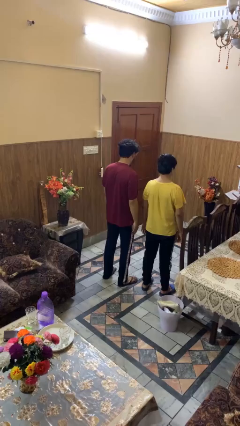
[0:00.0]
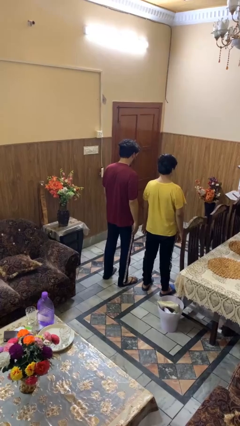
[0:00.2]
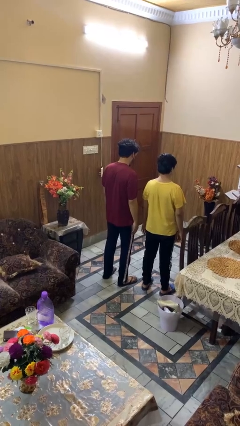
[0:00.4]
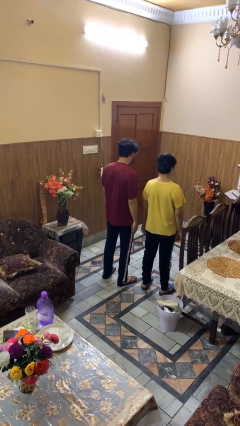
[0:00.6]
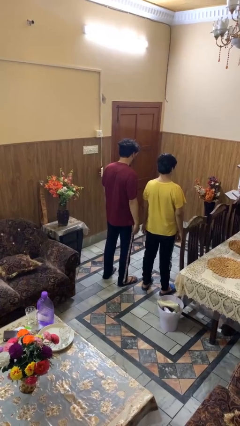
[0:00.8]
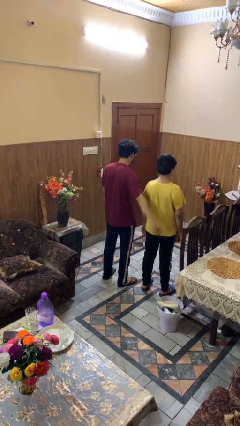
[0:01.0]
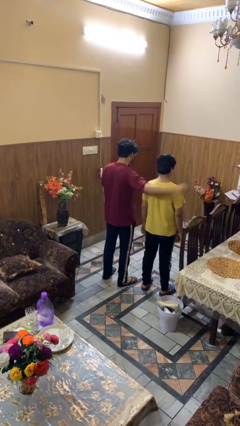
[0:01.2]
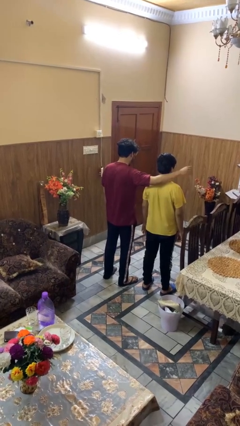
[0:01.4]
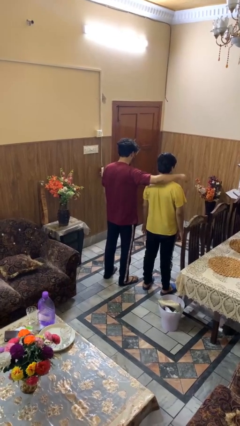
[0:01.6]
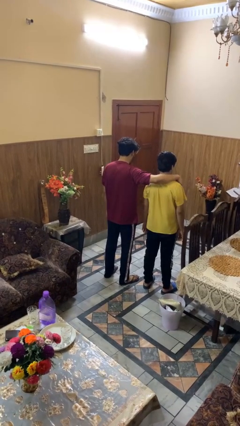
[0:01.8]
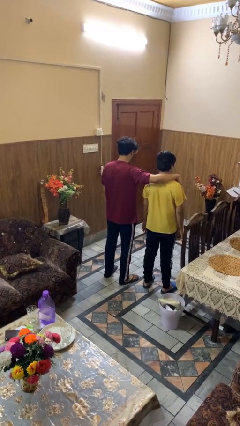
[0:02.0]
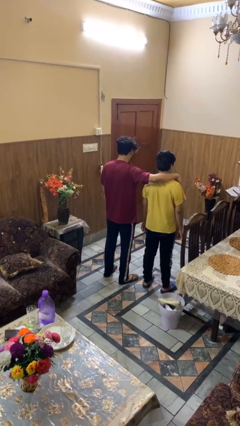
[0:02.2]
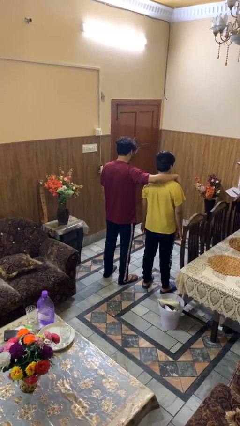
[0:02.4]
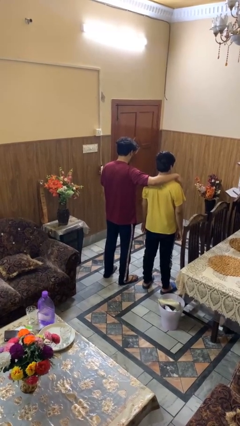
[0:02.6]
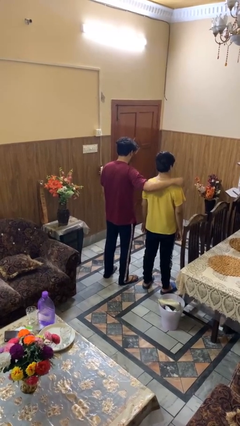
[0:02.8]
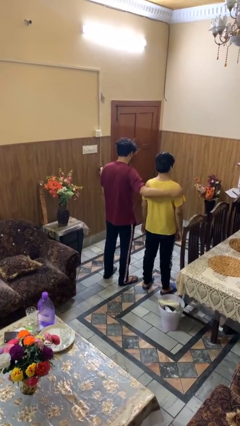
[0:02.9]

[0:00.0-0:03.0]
person pounds shoulders of person

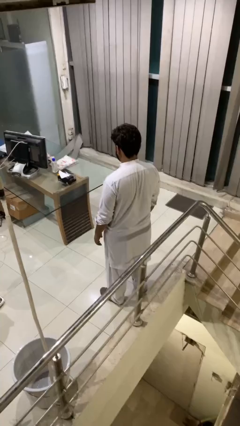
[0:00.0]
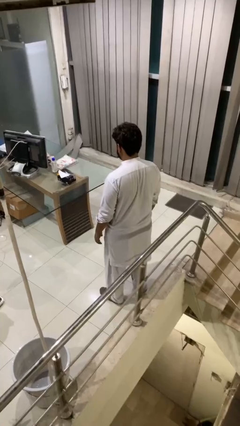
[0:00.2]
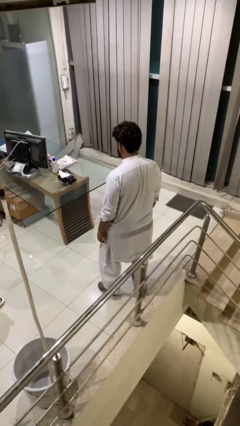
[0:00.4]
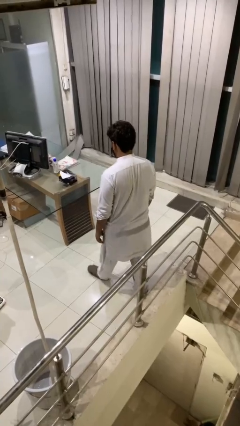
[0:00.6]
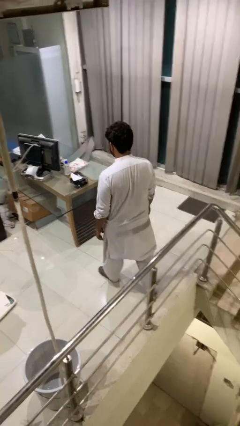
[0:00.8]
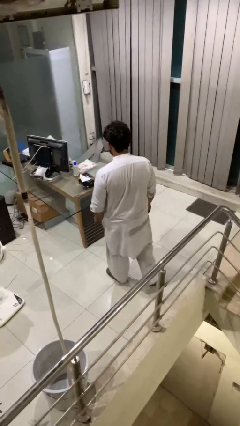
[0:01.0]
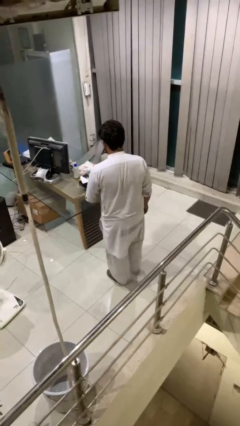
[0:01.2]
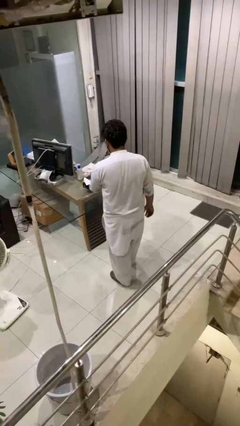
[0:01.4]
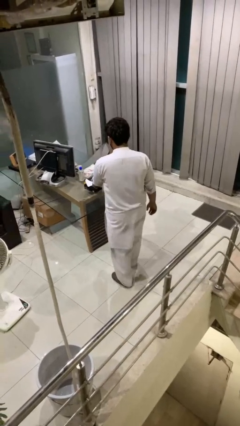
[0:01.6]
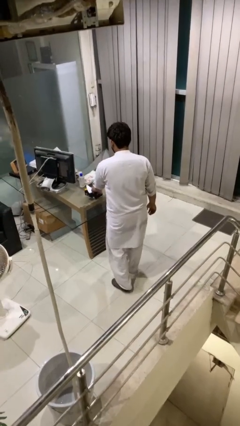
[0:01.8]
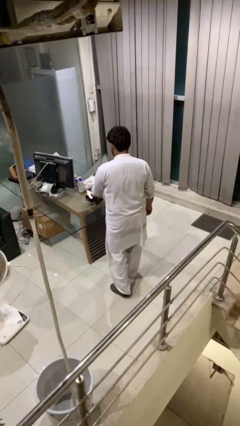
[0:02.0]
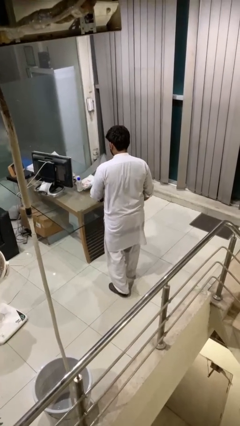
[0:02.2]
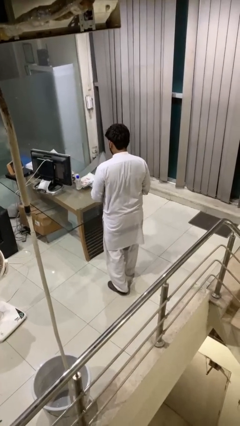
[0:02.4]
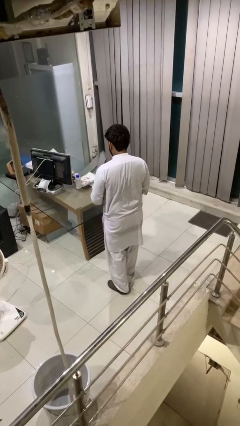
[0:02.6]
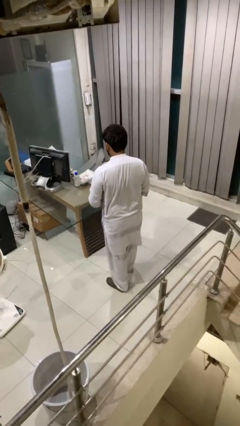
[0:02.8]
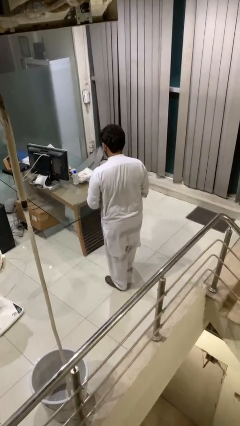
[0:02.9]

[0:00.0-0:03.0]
person picks up object from table

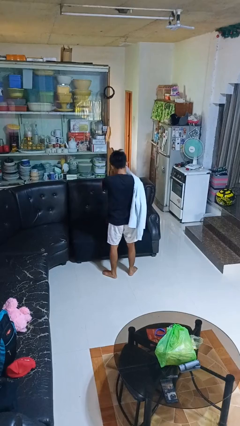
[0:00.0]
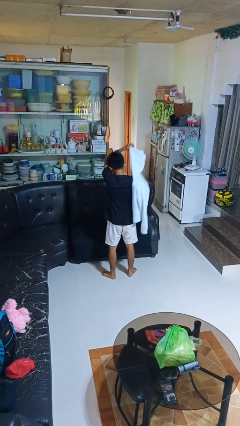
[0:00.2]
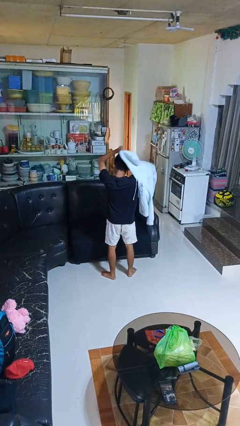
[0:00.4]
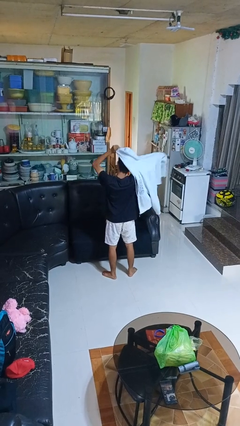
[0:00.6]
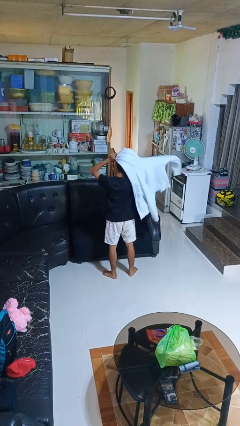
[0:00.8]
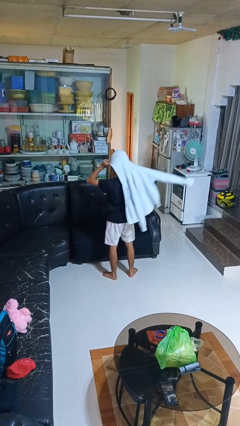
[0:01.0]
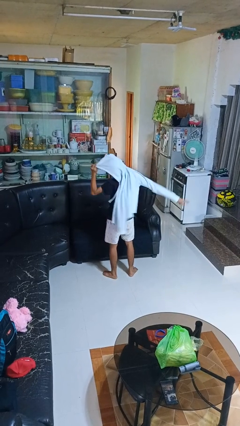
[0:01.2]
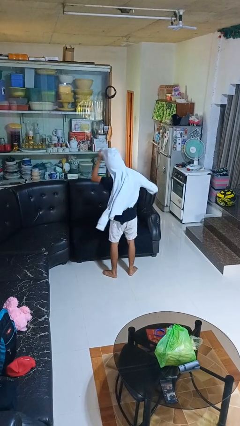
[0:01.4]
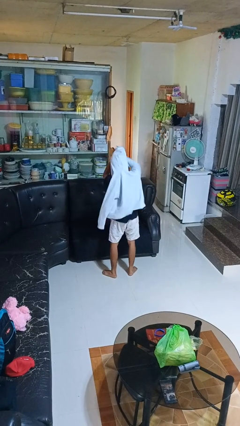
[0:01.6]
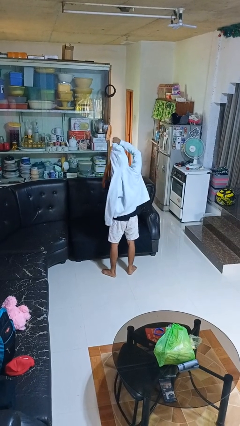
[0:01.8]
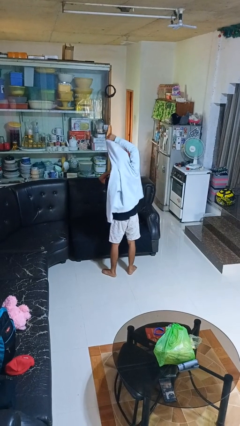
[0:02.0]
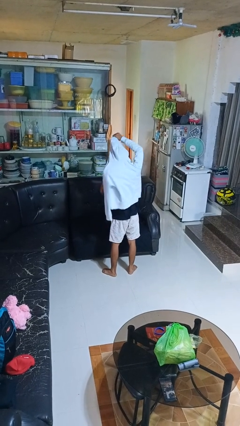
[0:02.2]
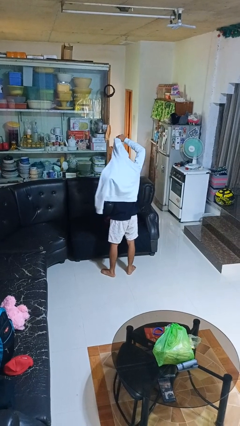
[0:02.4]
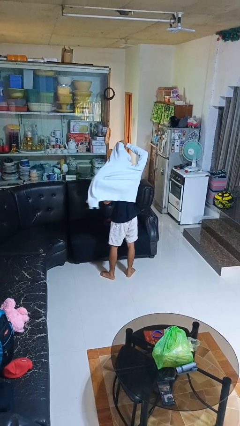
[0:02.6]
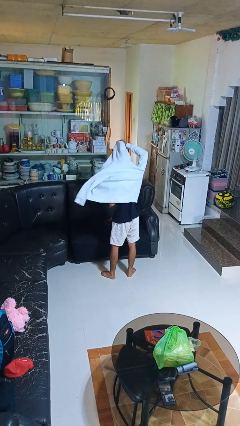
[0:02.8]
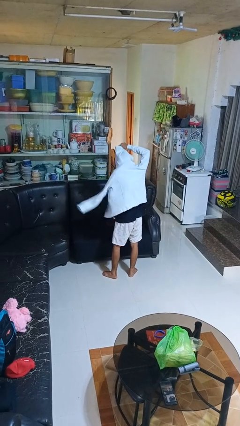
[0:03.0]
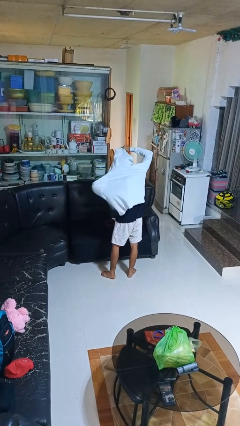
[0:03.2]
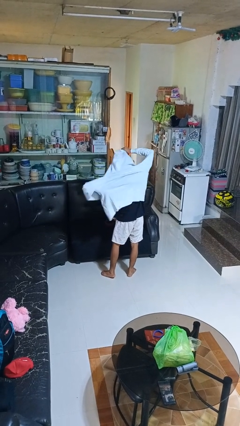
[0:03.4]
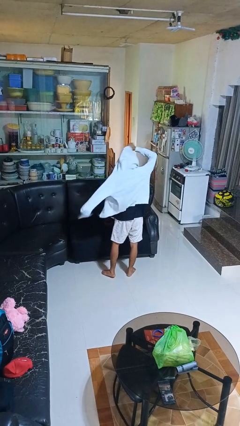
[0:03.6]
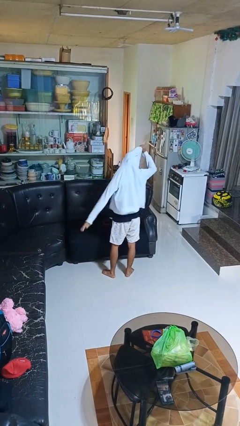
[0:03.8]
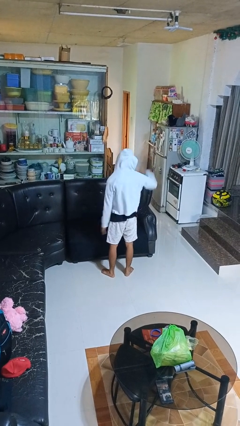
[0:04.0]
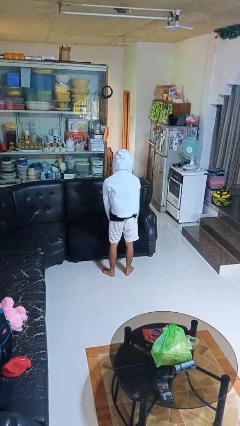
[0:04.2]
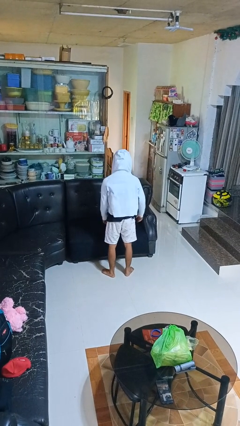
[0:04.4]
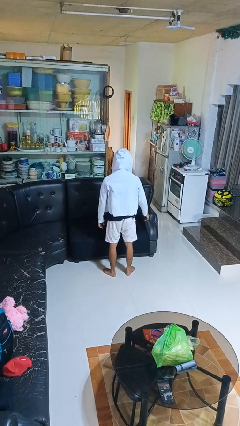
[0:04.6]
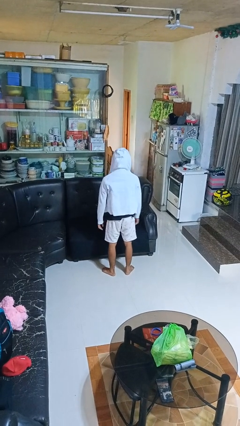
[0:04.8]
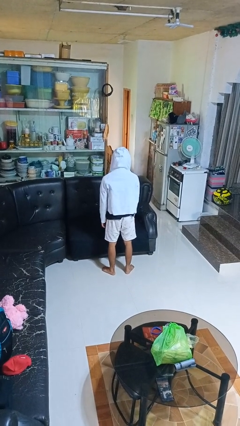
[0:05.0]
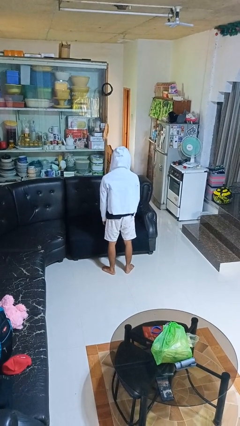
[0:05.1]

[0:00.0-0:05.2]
person puts on hoodie

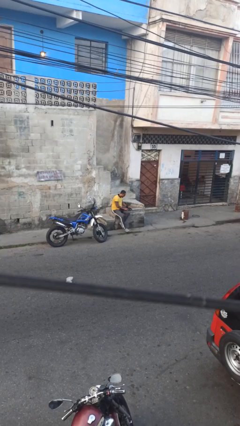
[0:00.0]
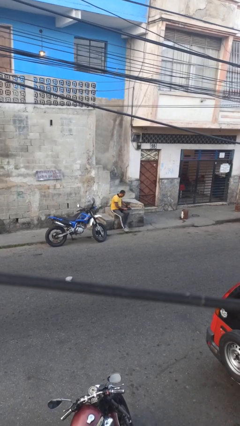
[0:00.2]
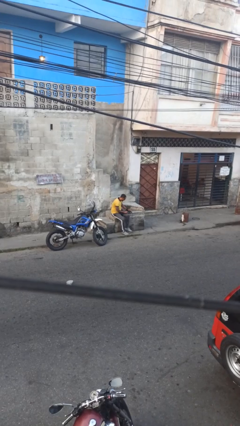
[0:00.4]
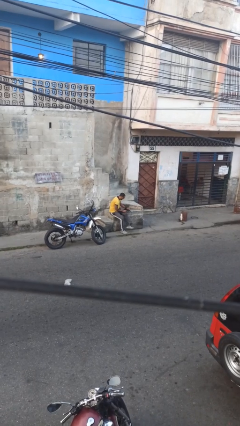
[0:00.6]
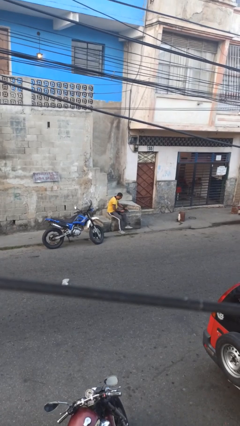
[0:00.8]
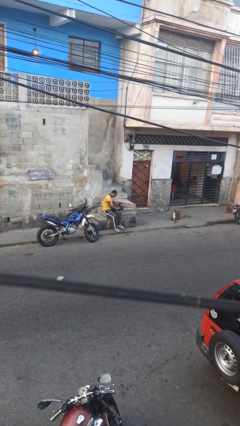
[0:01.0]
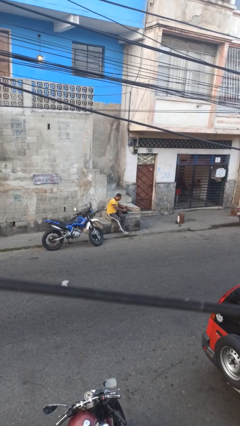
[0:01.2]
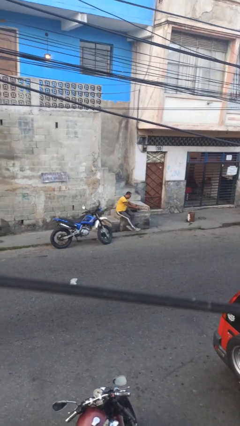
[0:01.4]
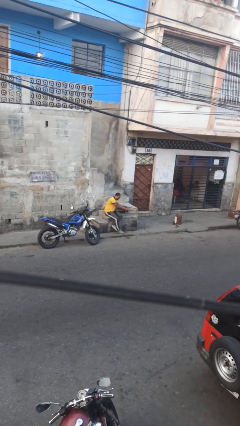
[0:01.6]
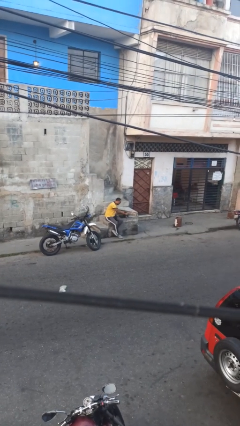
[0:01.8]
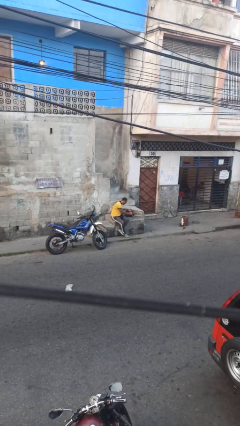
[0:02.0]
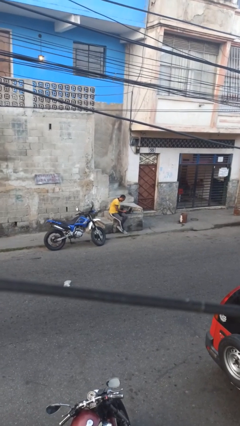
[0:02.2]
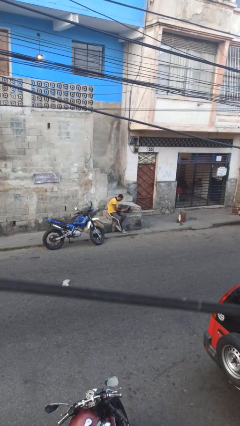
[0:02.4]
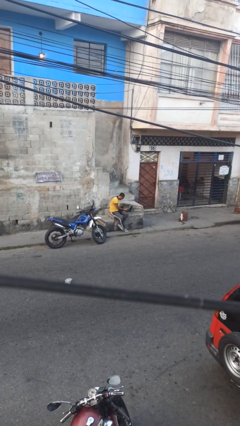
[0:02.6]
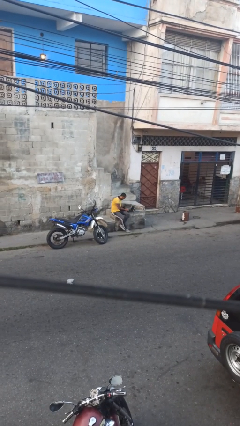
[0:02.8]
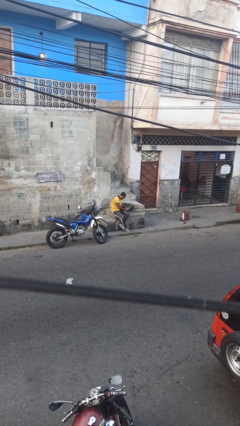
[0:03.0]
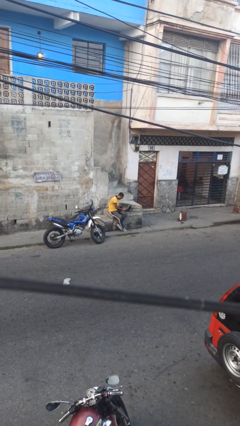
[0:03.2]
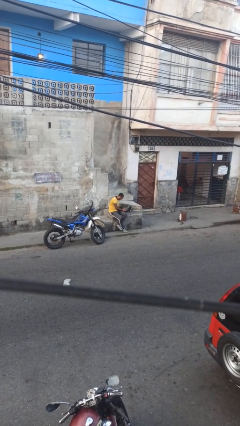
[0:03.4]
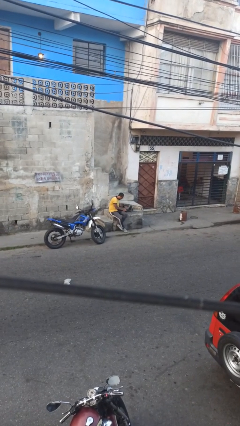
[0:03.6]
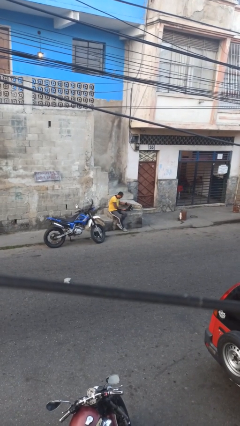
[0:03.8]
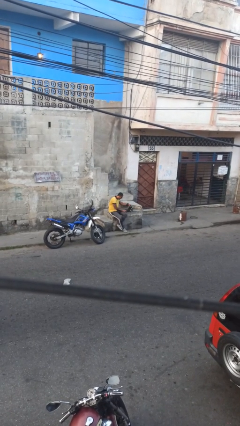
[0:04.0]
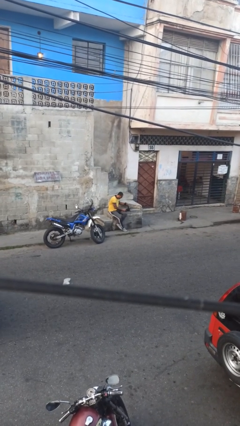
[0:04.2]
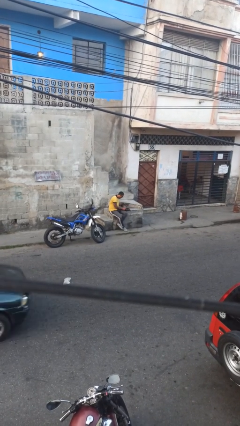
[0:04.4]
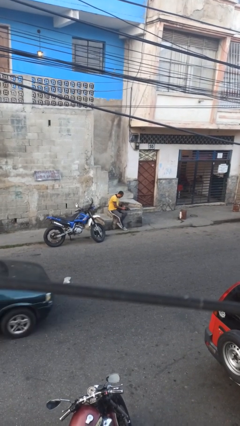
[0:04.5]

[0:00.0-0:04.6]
person interacts with laptop

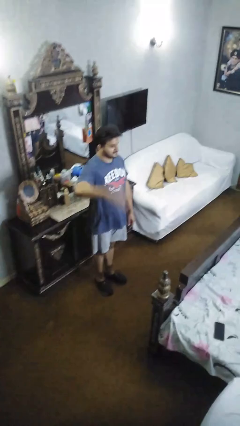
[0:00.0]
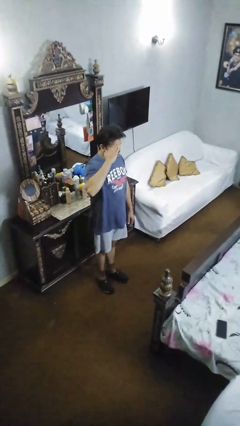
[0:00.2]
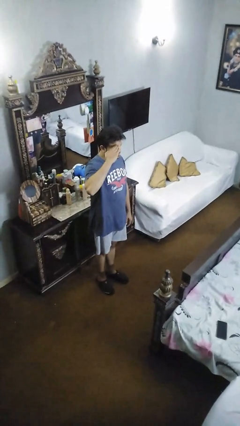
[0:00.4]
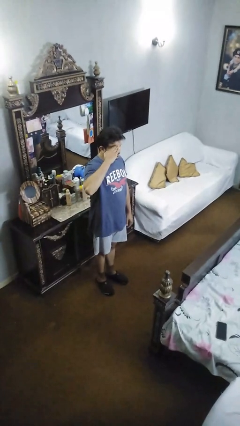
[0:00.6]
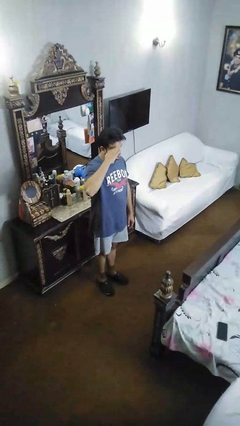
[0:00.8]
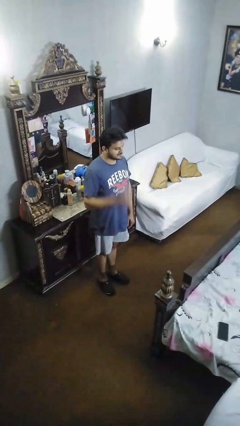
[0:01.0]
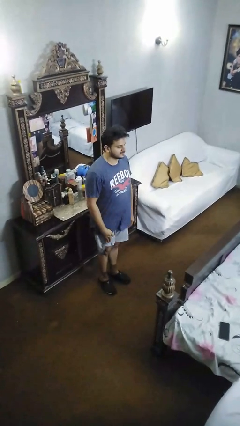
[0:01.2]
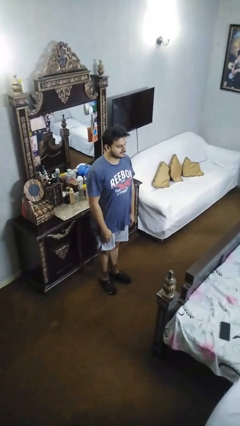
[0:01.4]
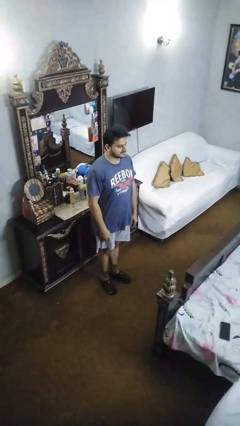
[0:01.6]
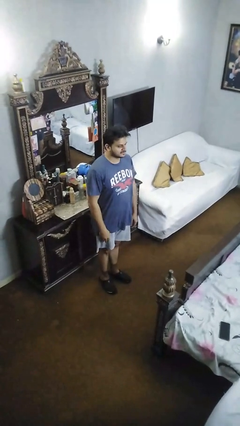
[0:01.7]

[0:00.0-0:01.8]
person salutes
